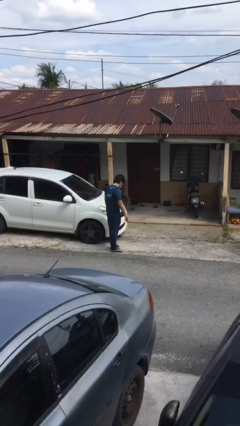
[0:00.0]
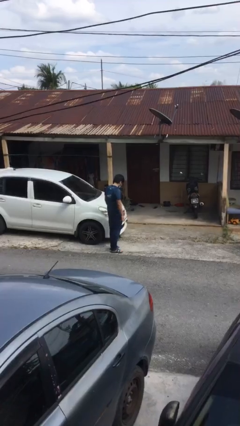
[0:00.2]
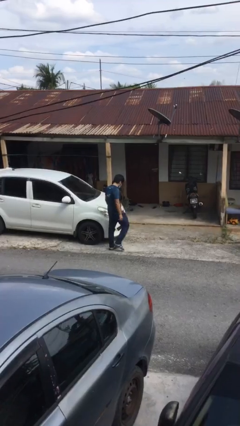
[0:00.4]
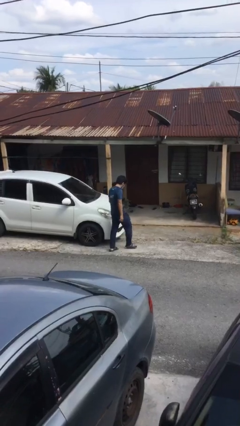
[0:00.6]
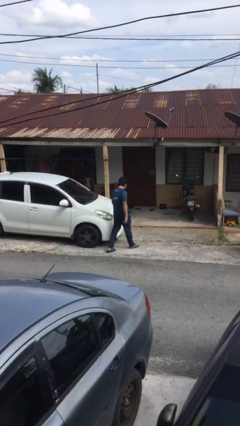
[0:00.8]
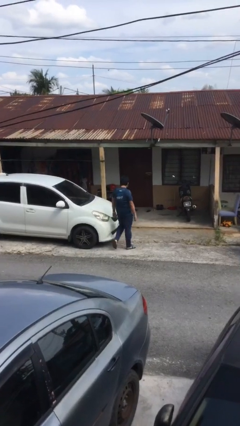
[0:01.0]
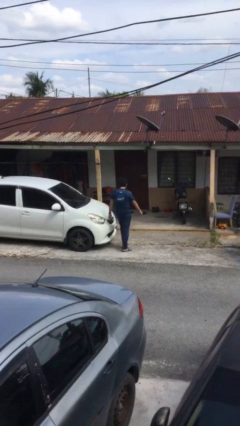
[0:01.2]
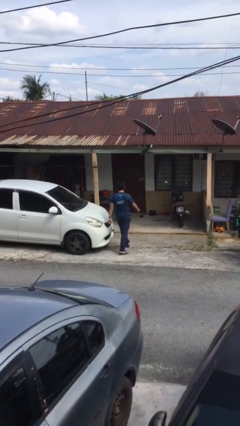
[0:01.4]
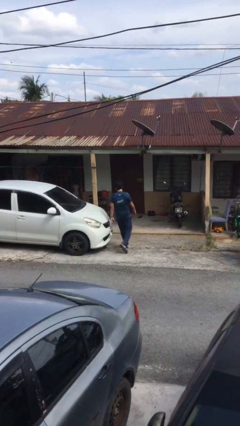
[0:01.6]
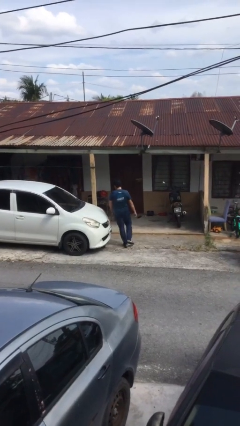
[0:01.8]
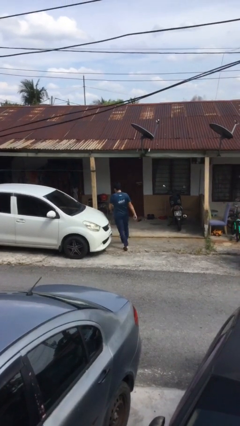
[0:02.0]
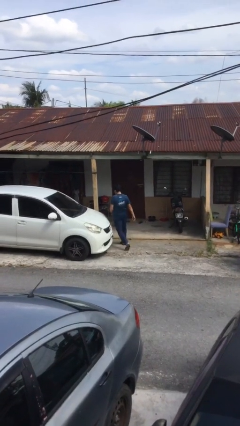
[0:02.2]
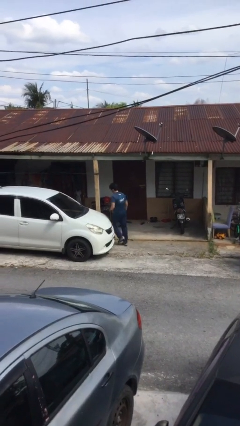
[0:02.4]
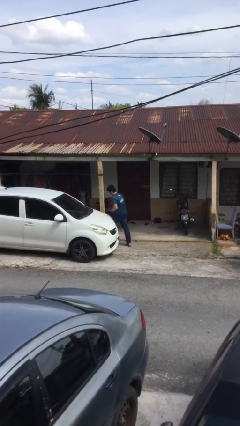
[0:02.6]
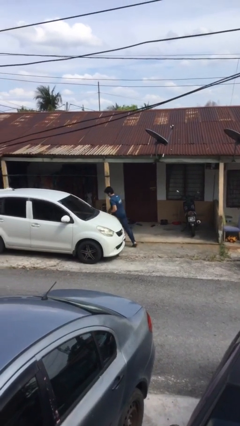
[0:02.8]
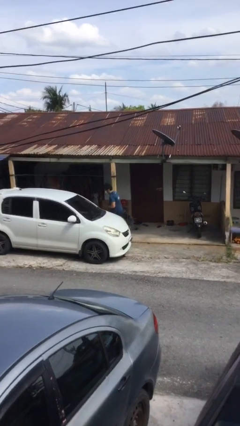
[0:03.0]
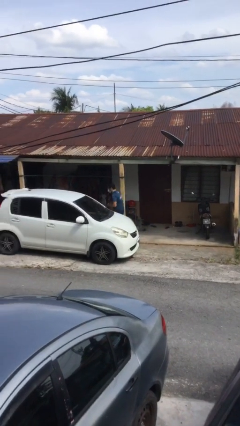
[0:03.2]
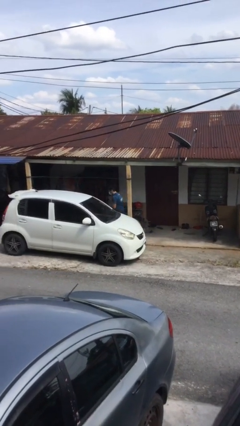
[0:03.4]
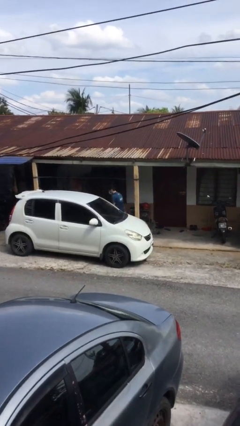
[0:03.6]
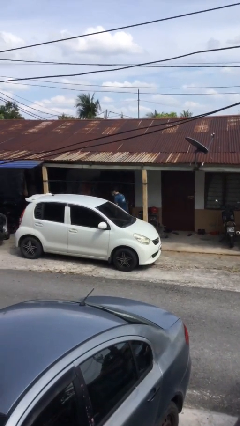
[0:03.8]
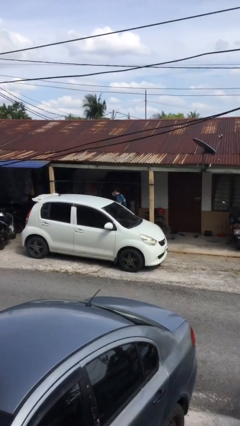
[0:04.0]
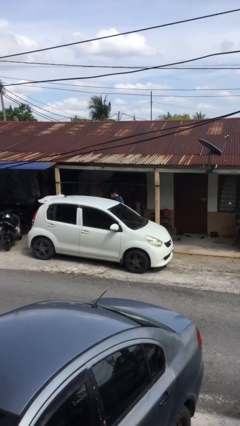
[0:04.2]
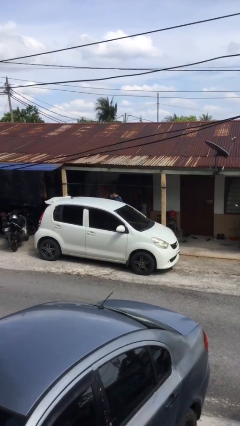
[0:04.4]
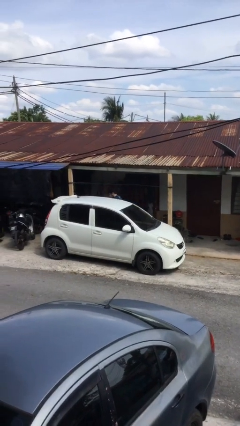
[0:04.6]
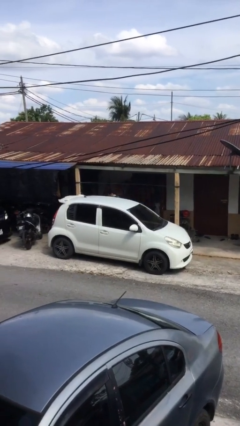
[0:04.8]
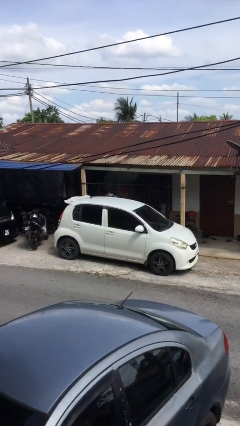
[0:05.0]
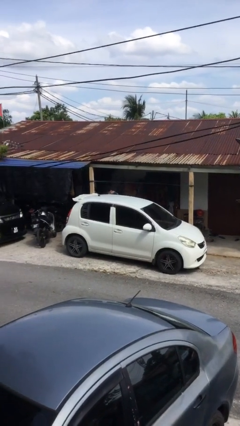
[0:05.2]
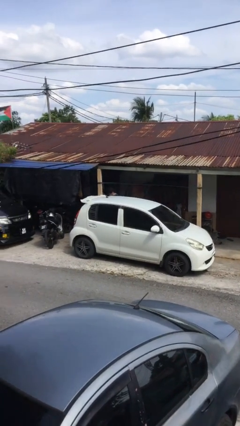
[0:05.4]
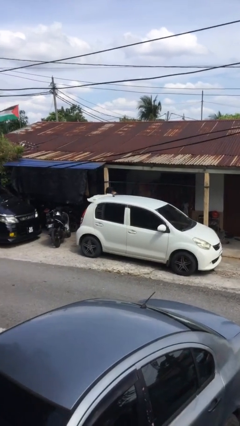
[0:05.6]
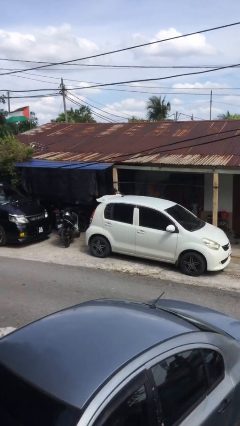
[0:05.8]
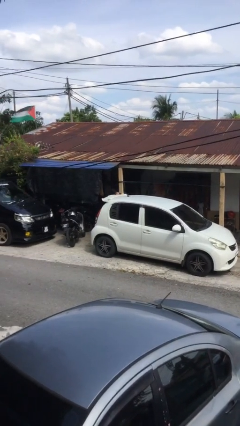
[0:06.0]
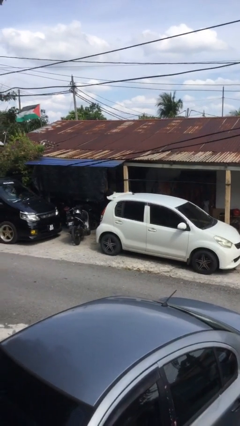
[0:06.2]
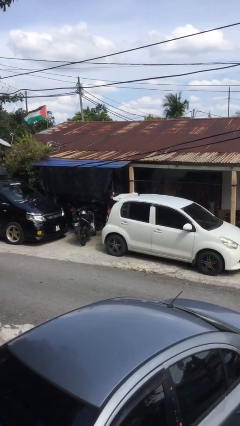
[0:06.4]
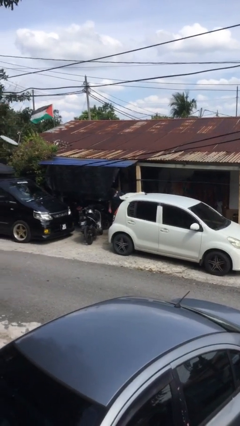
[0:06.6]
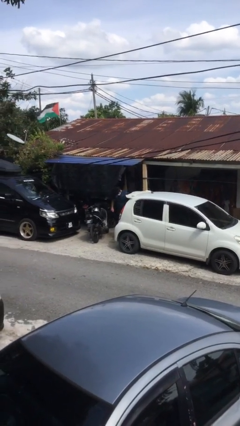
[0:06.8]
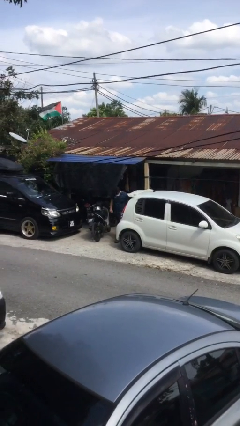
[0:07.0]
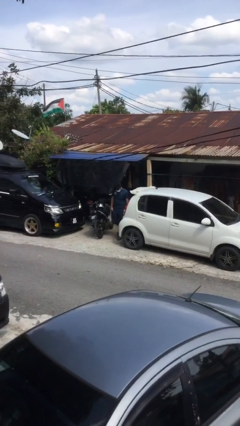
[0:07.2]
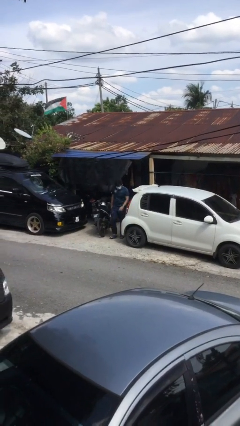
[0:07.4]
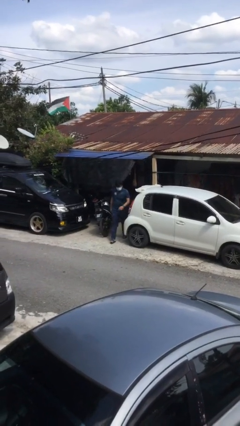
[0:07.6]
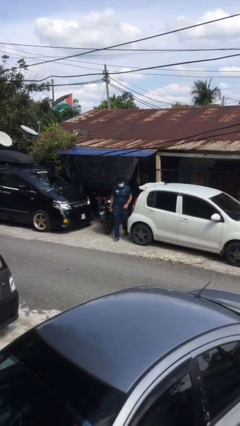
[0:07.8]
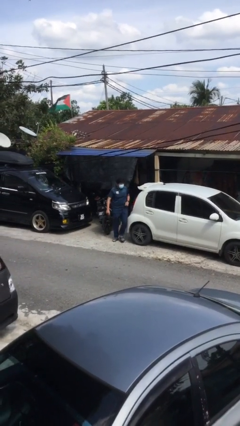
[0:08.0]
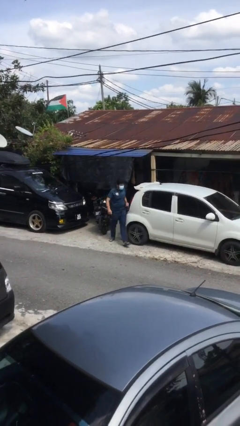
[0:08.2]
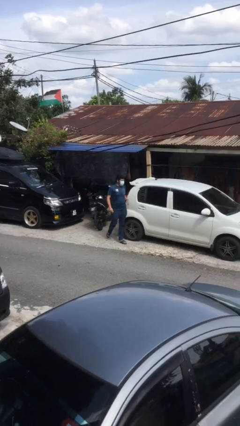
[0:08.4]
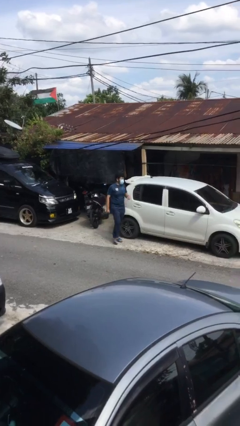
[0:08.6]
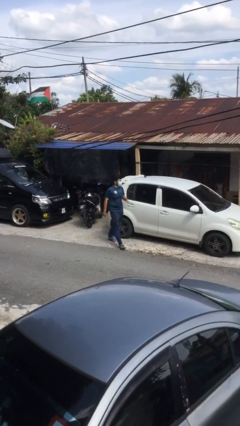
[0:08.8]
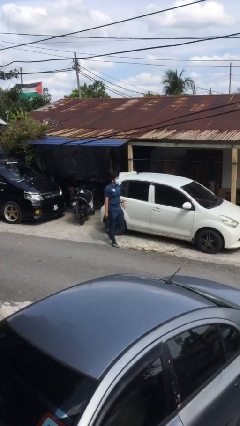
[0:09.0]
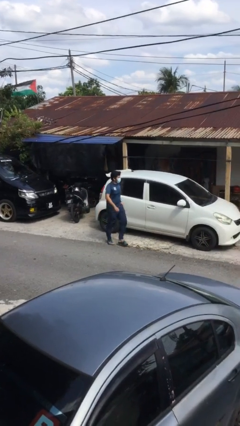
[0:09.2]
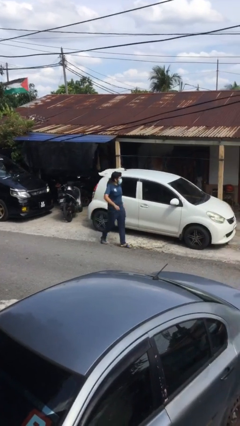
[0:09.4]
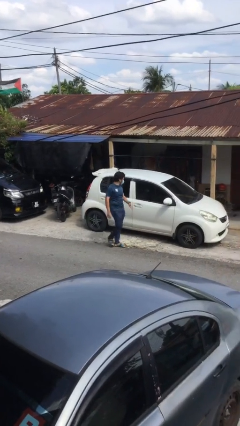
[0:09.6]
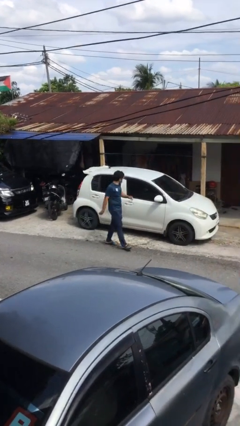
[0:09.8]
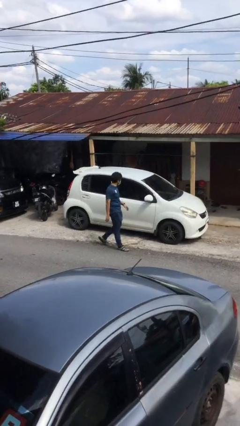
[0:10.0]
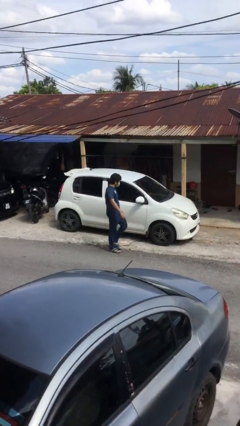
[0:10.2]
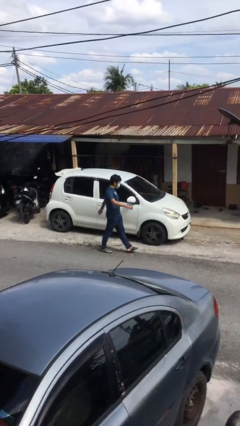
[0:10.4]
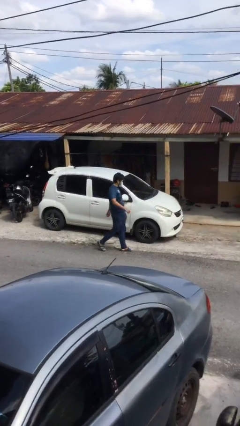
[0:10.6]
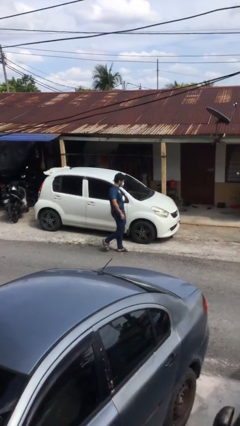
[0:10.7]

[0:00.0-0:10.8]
person walks around car

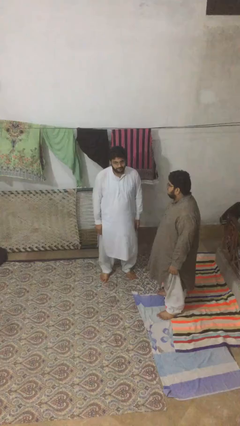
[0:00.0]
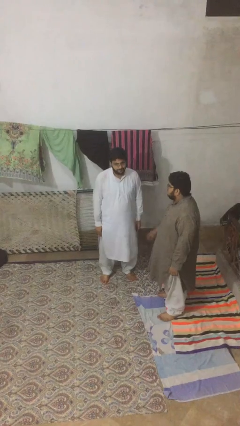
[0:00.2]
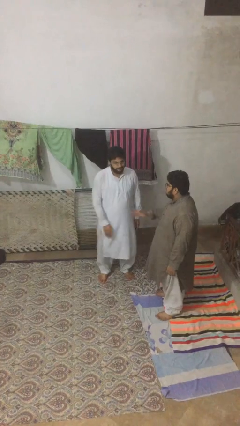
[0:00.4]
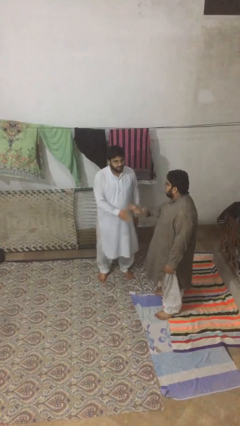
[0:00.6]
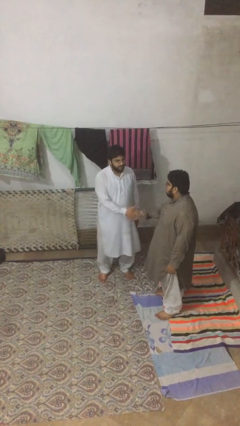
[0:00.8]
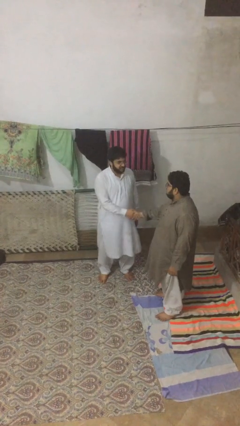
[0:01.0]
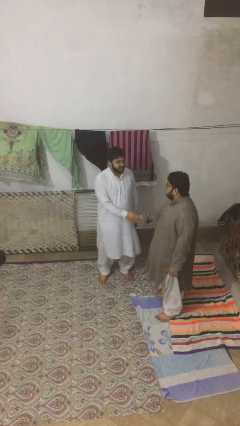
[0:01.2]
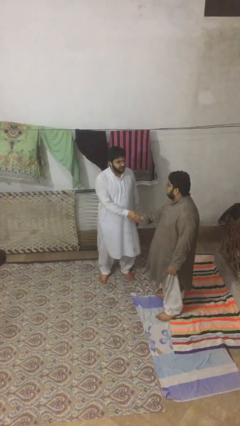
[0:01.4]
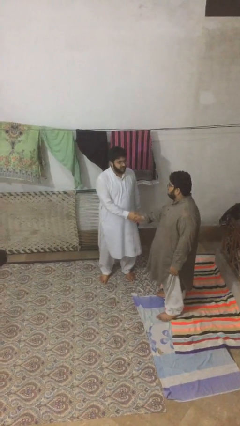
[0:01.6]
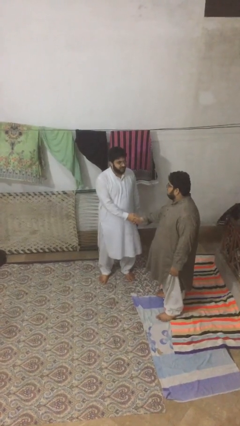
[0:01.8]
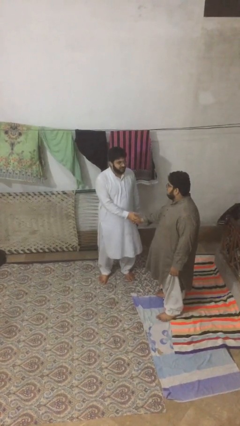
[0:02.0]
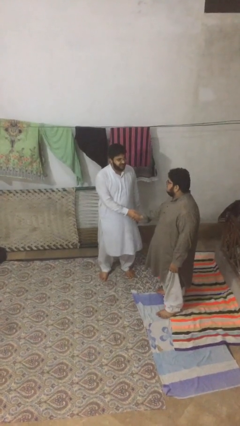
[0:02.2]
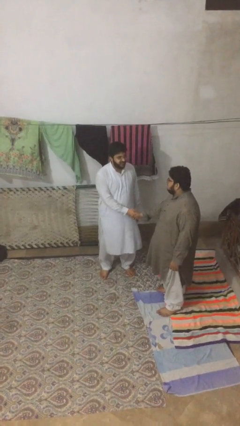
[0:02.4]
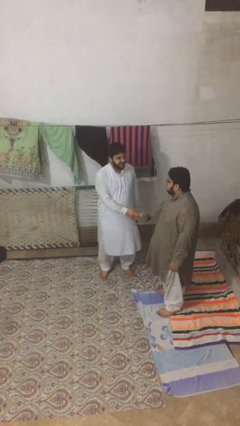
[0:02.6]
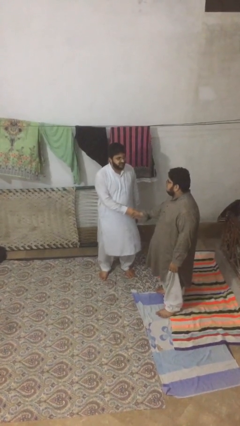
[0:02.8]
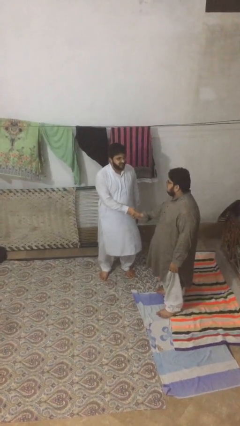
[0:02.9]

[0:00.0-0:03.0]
person shakes hand

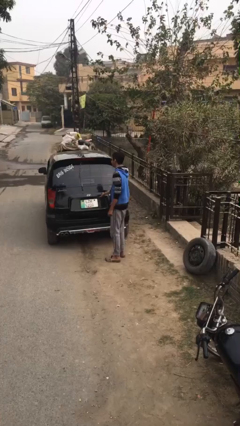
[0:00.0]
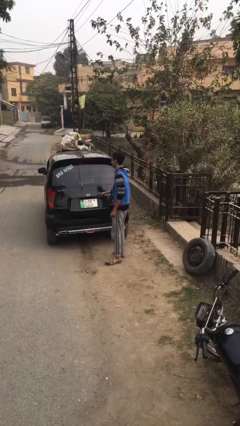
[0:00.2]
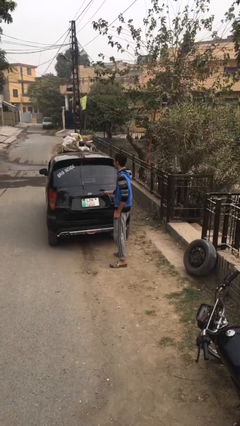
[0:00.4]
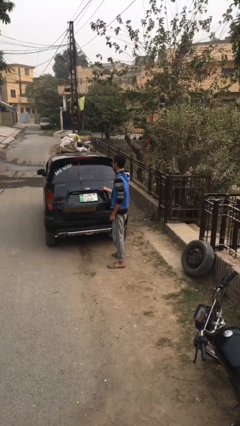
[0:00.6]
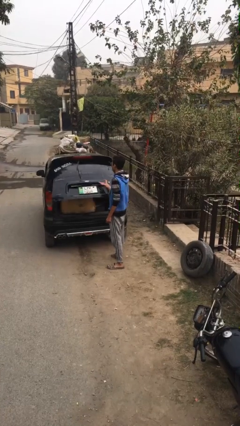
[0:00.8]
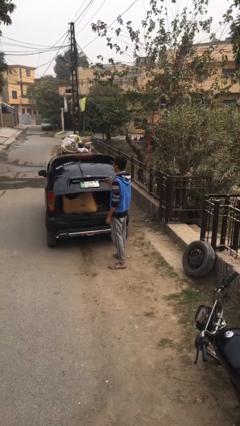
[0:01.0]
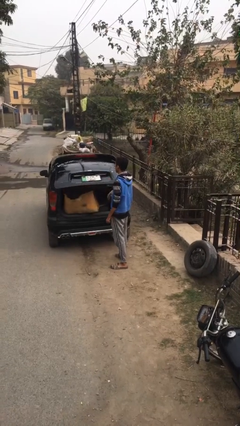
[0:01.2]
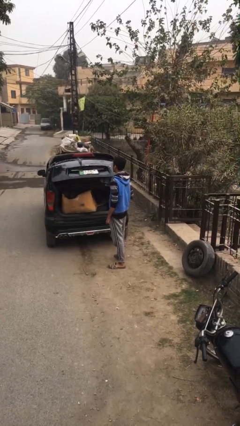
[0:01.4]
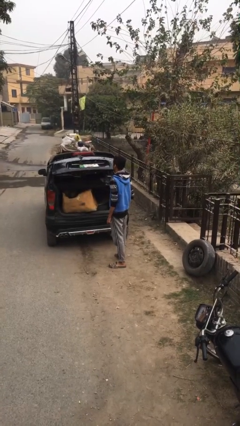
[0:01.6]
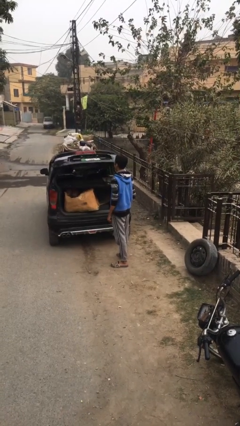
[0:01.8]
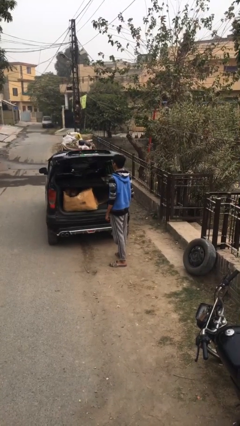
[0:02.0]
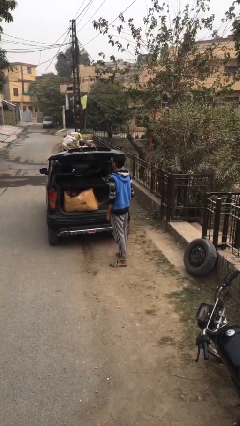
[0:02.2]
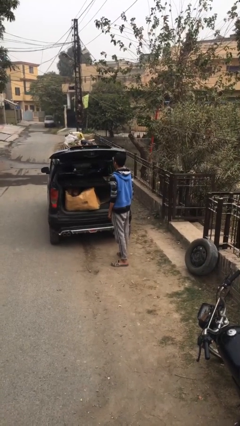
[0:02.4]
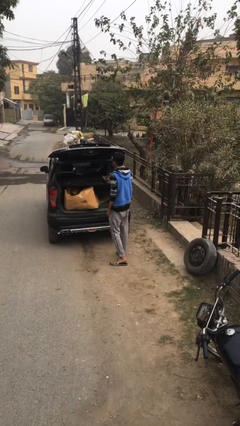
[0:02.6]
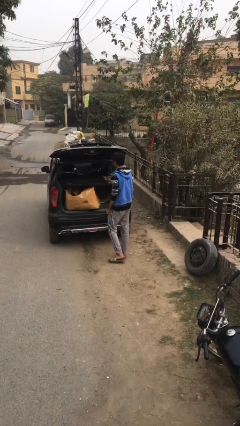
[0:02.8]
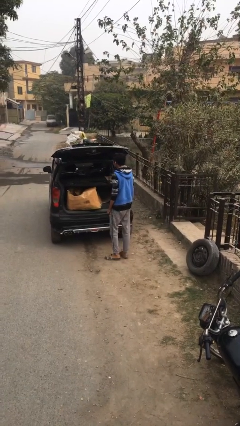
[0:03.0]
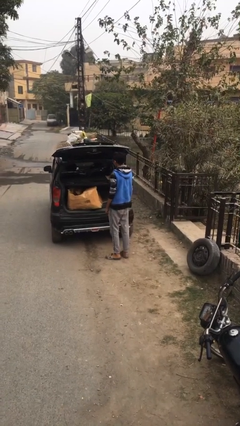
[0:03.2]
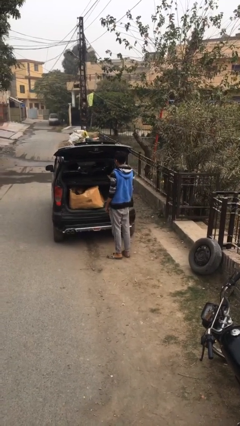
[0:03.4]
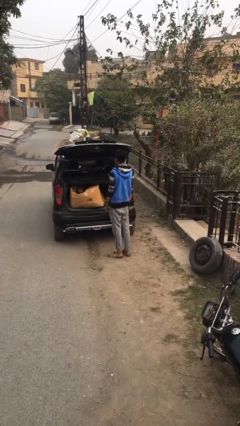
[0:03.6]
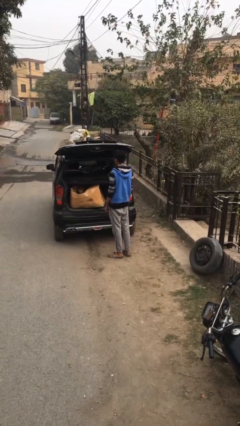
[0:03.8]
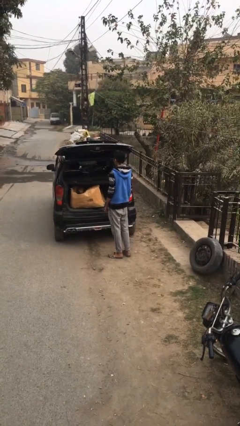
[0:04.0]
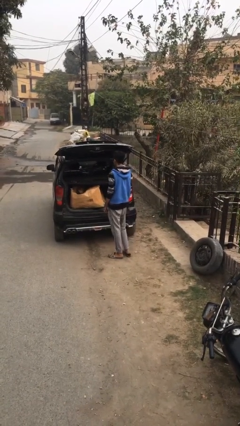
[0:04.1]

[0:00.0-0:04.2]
person opens car trunk
